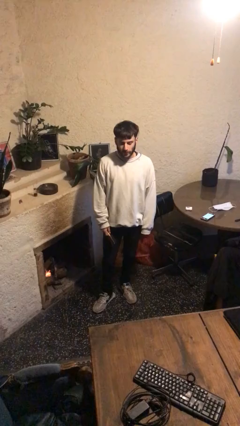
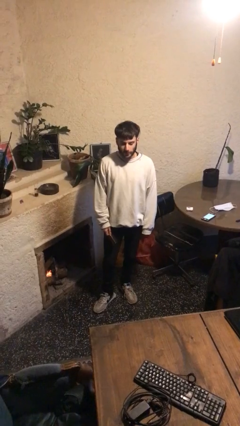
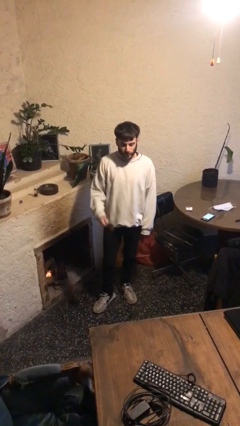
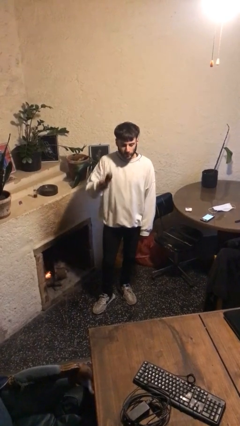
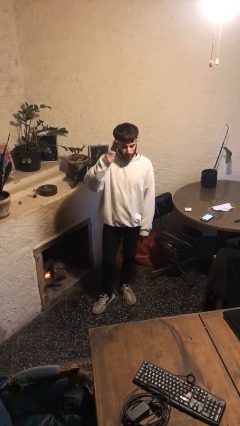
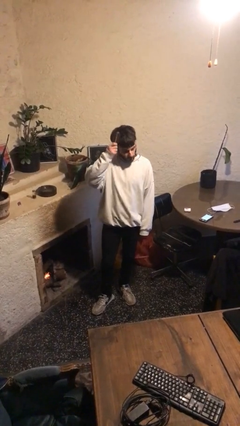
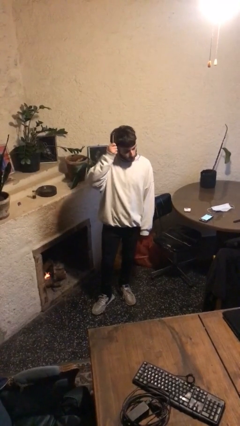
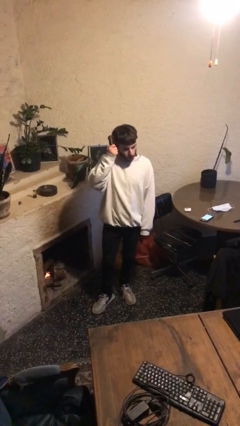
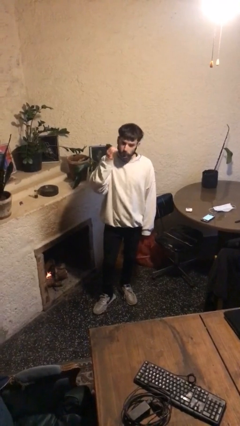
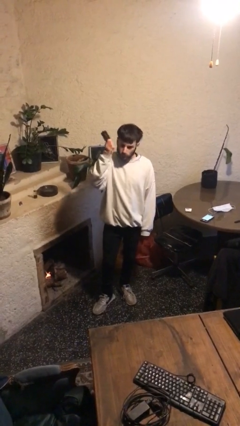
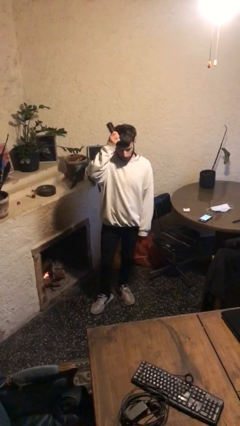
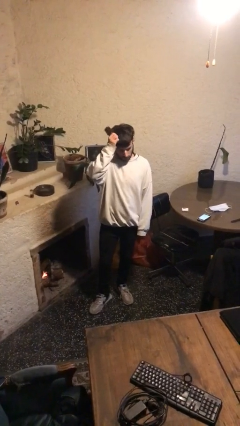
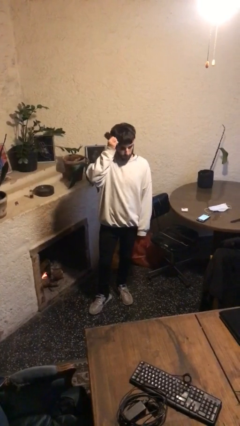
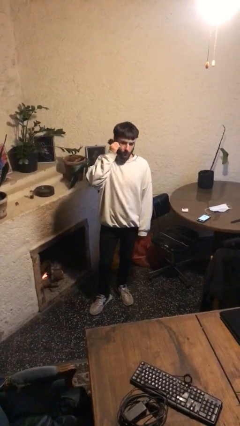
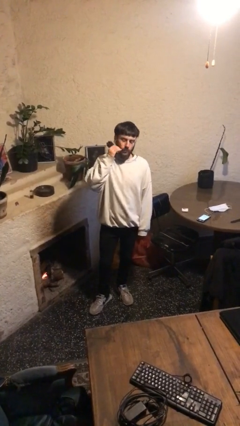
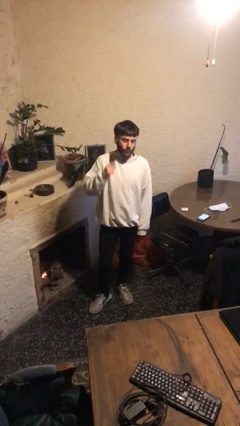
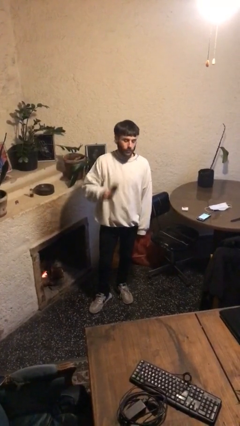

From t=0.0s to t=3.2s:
person brushes hair

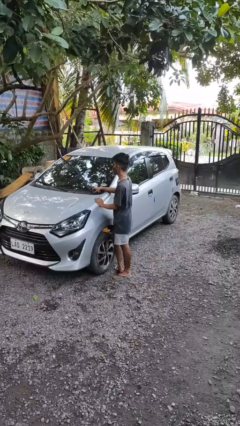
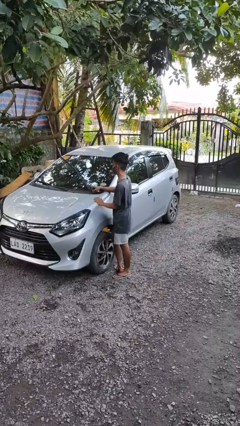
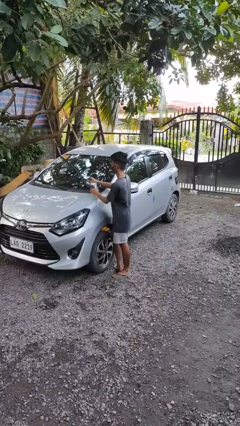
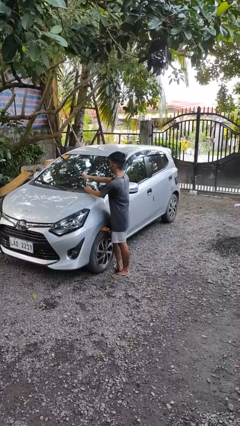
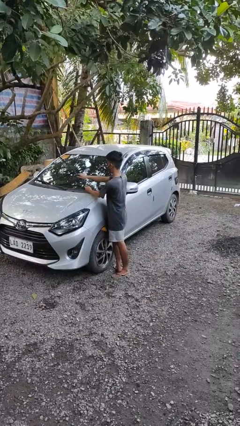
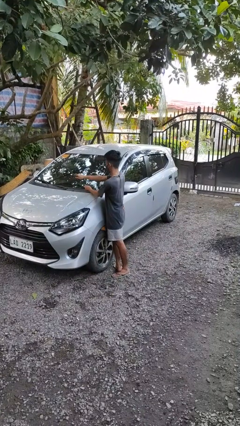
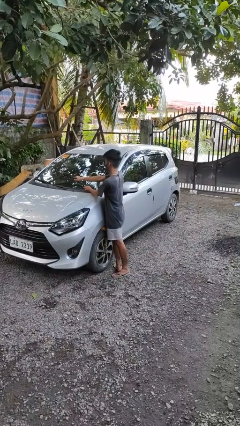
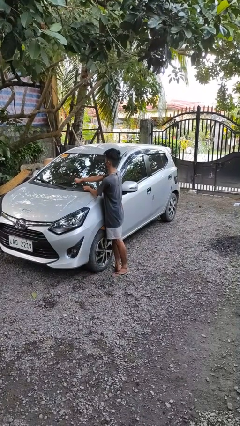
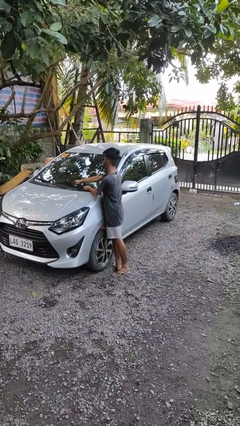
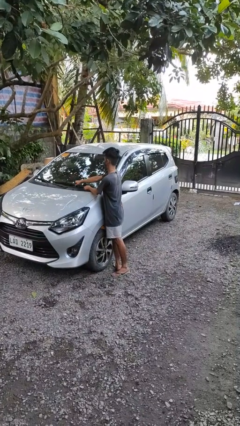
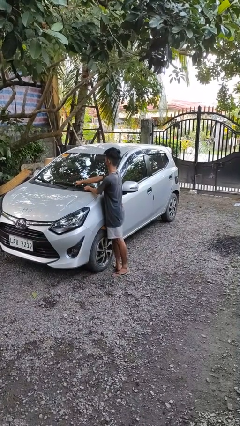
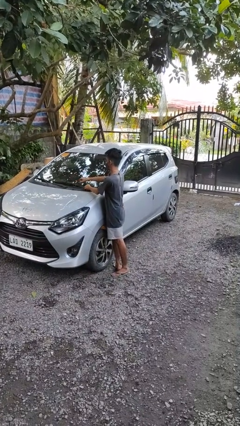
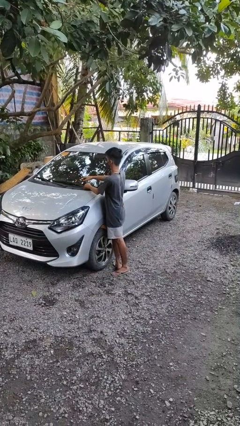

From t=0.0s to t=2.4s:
person flips down car wipers

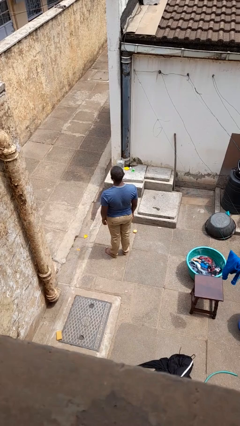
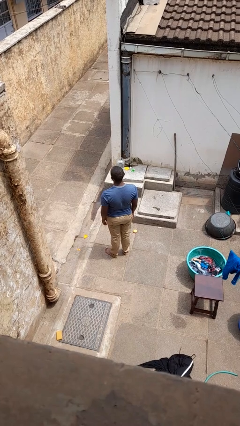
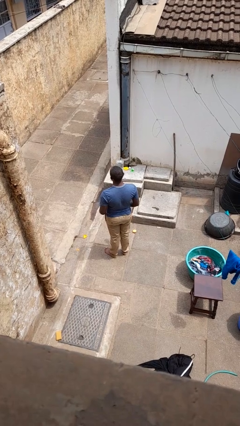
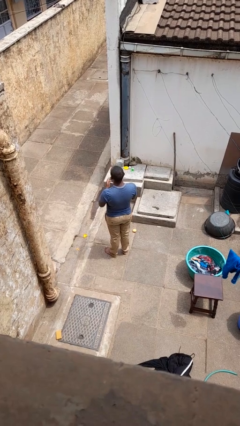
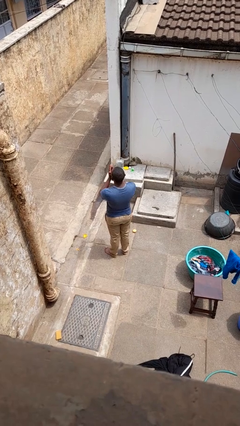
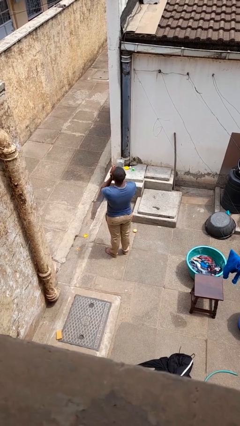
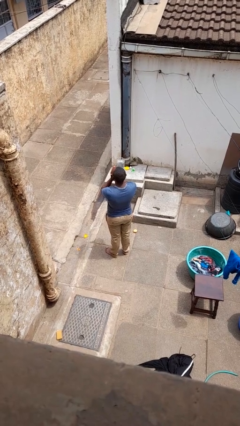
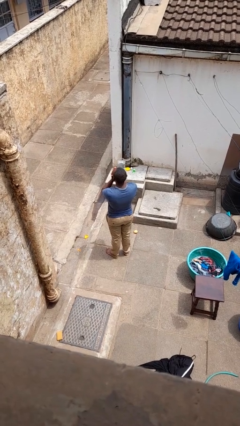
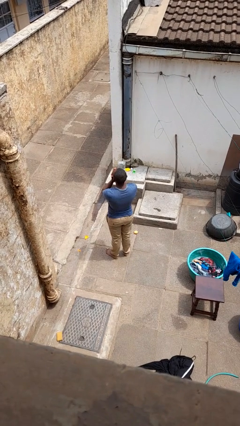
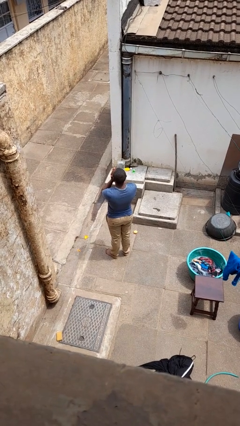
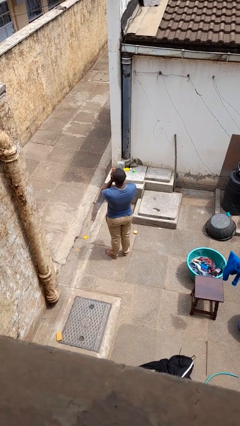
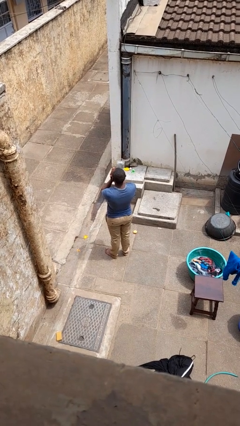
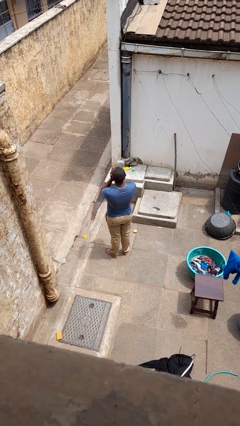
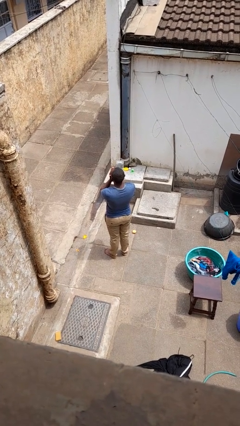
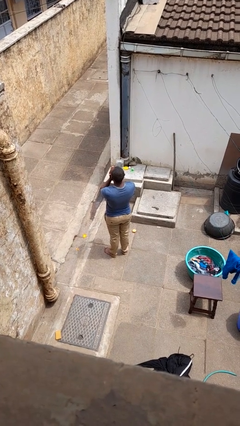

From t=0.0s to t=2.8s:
person blows into hands

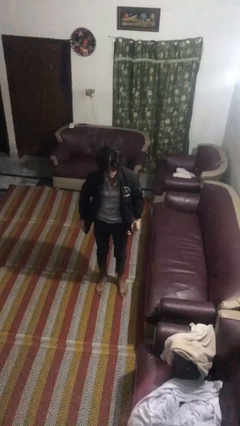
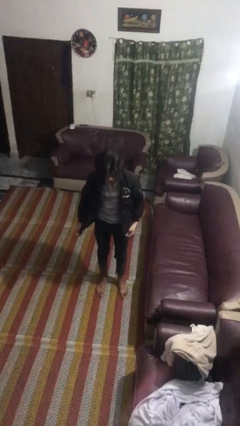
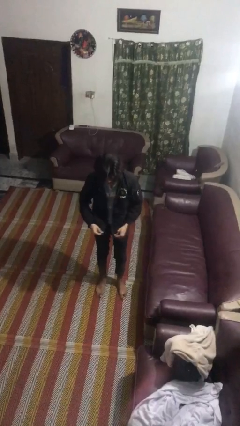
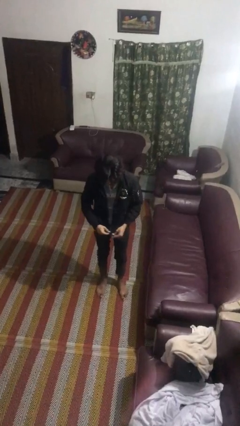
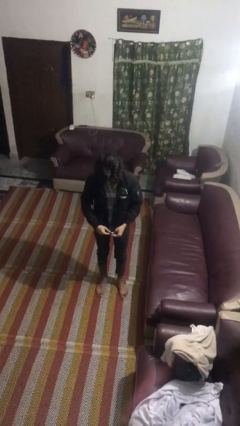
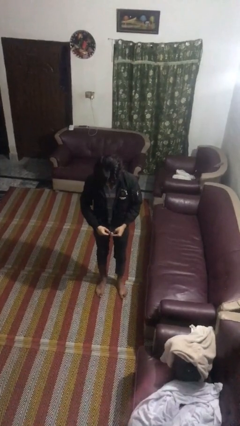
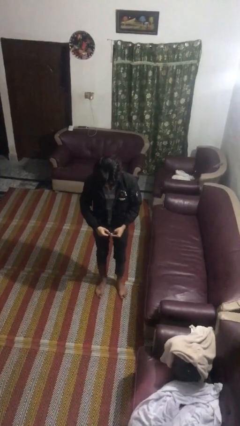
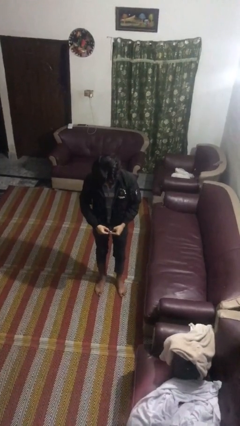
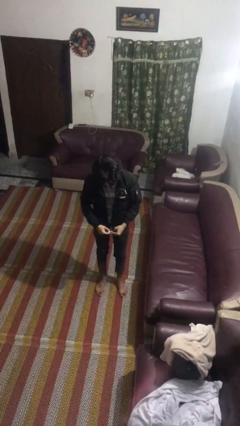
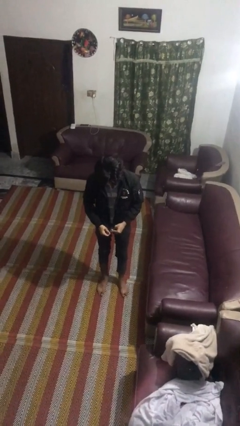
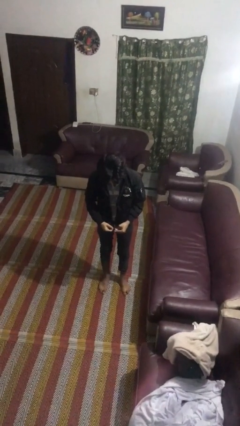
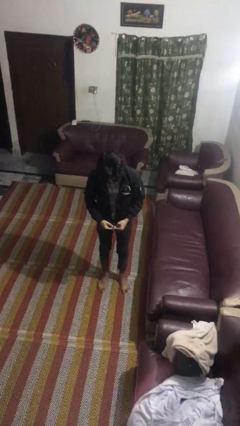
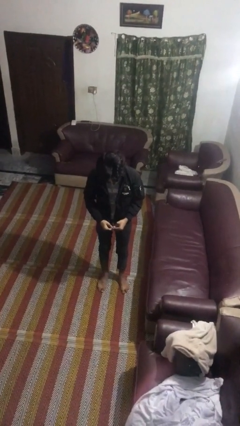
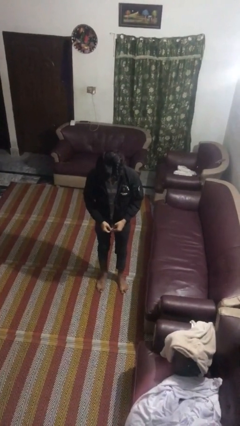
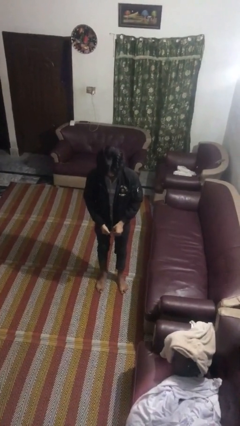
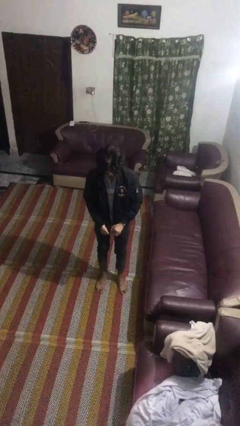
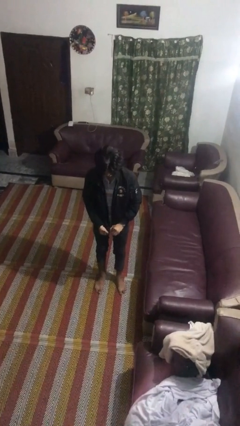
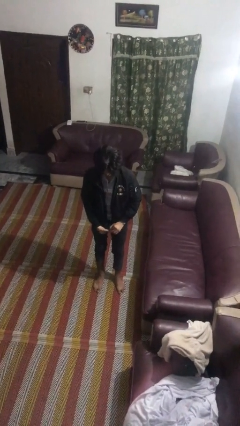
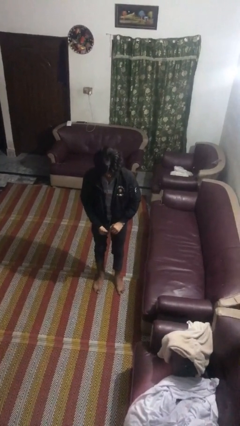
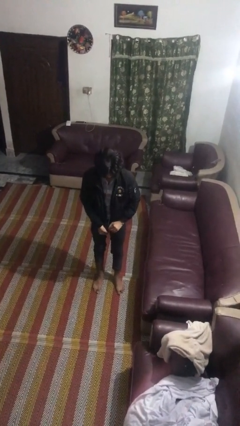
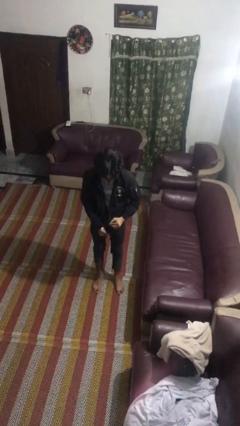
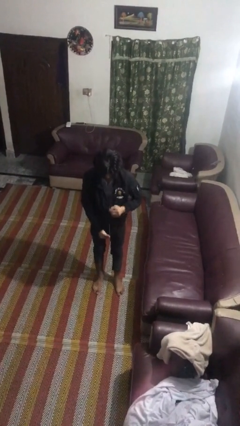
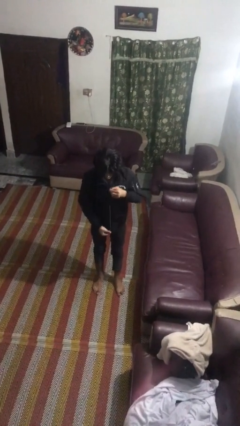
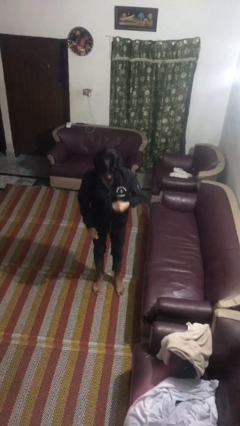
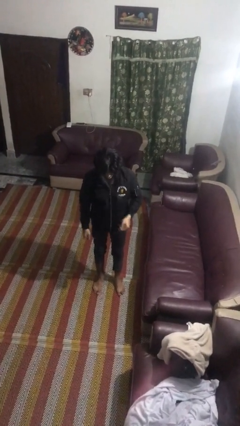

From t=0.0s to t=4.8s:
person zips up jacket

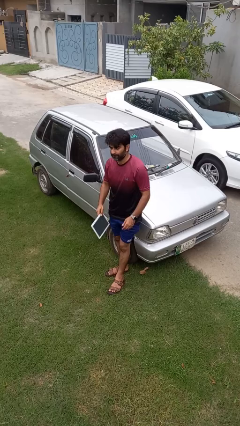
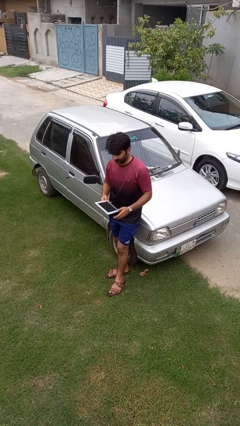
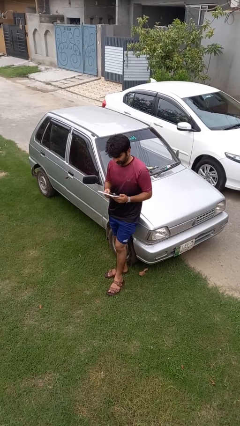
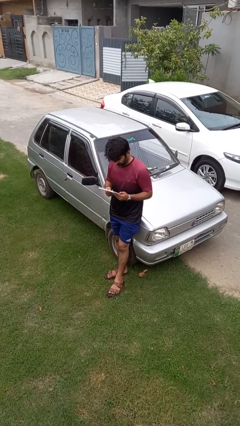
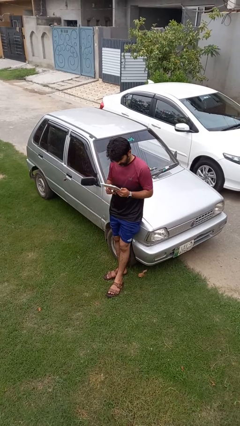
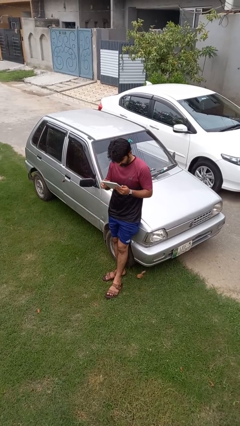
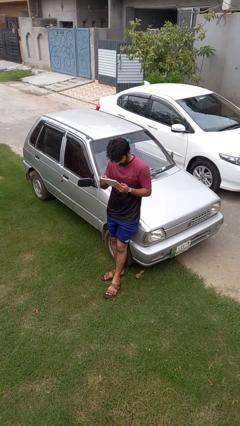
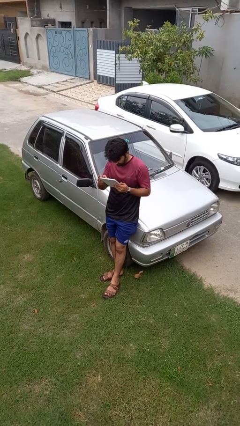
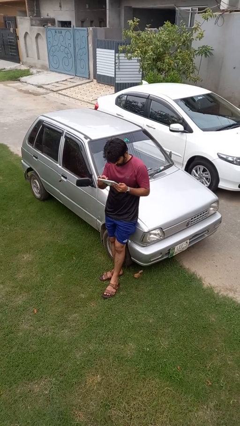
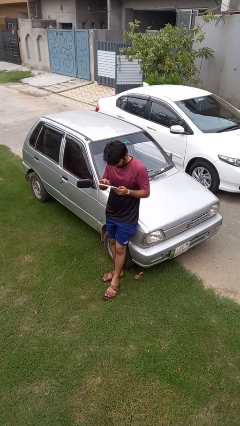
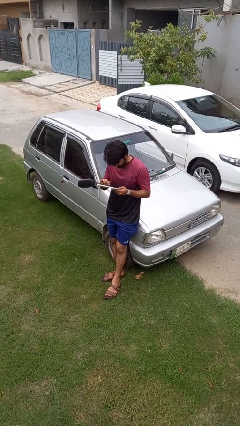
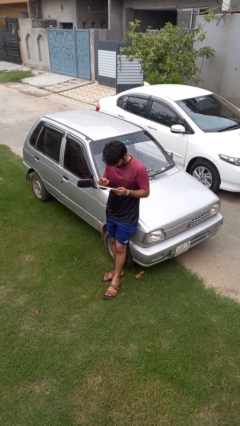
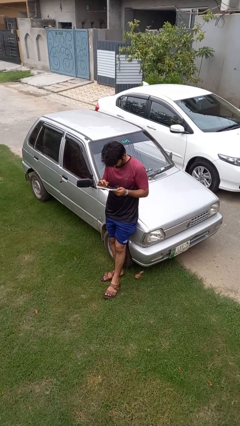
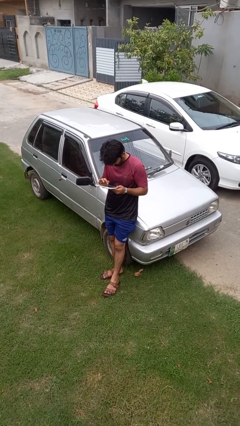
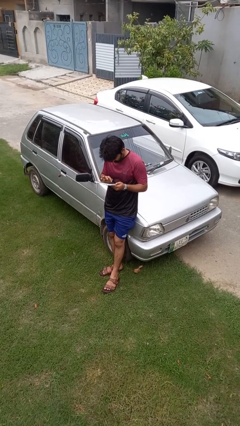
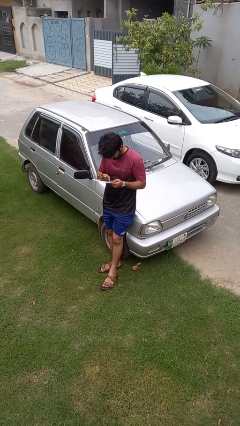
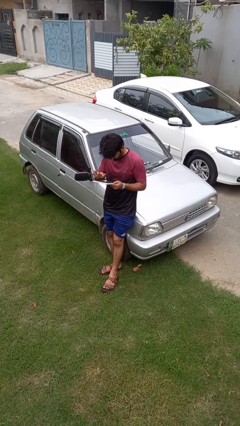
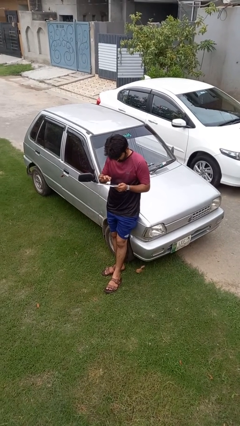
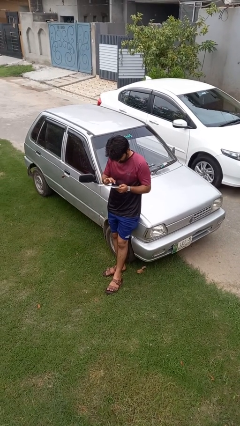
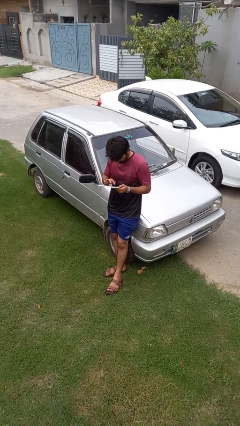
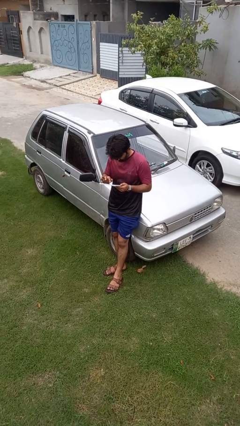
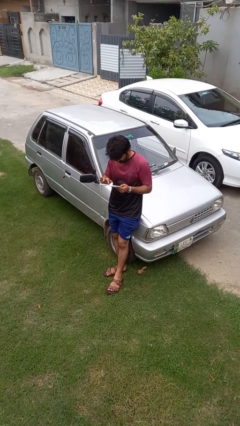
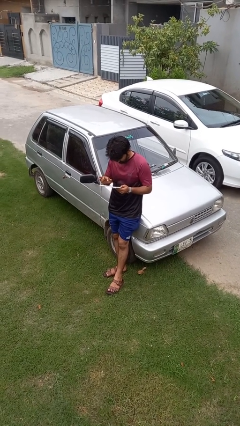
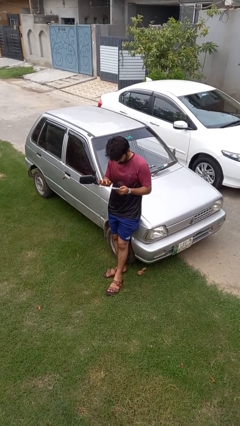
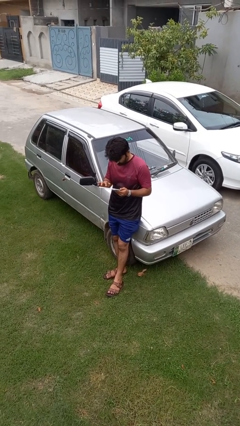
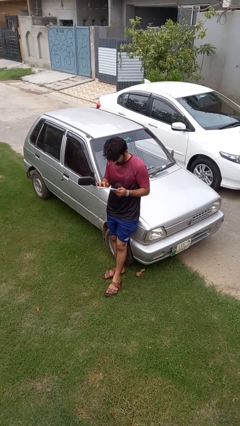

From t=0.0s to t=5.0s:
person interacts with tablet
